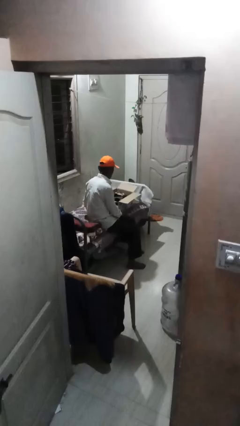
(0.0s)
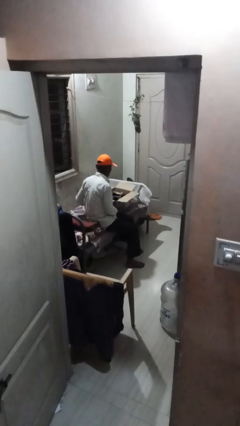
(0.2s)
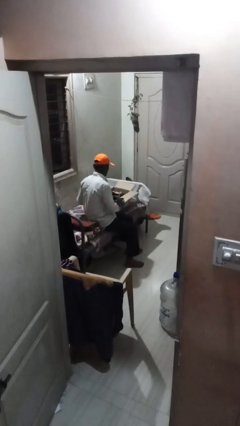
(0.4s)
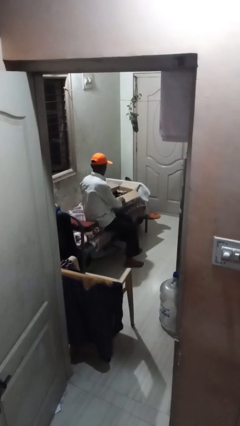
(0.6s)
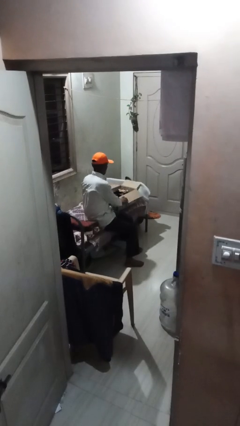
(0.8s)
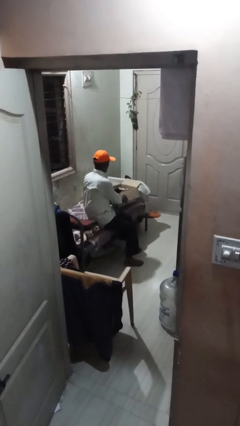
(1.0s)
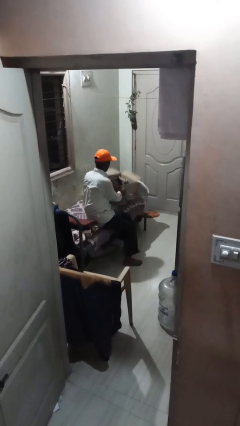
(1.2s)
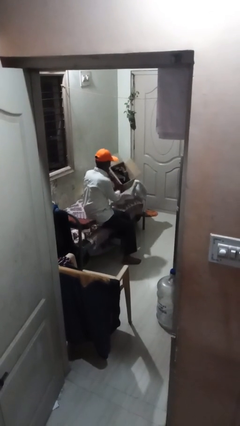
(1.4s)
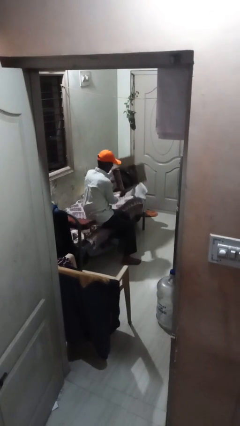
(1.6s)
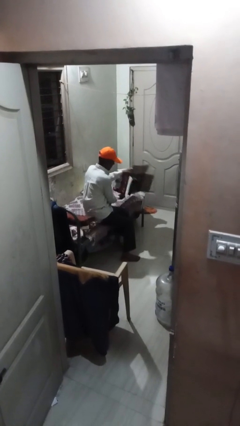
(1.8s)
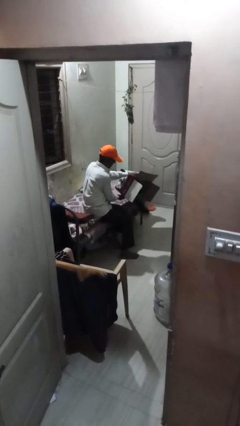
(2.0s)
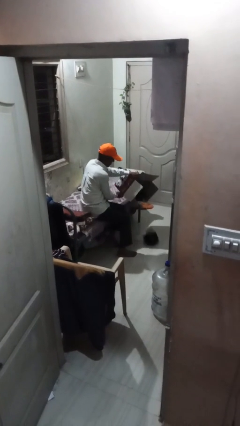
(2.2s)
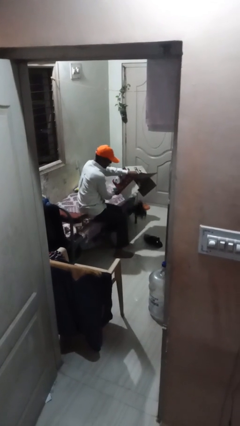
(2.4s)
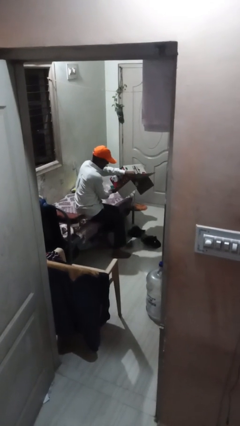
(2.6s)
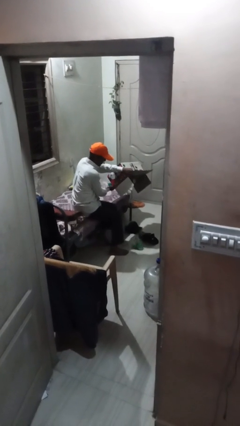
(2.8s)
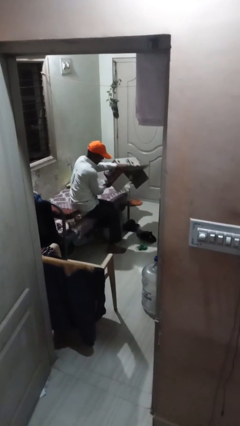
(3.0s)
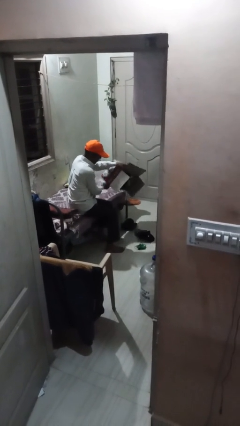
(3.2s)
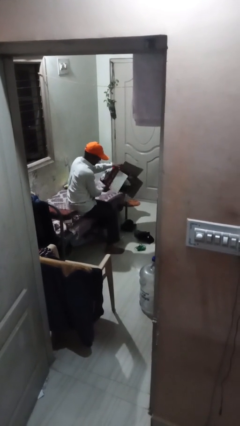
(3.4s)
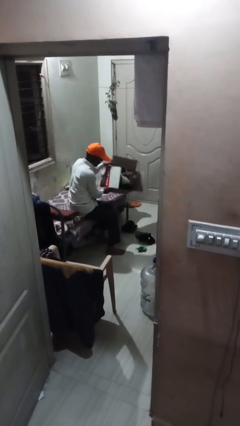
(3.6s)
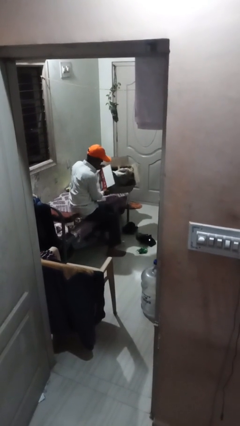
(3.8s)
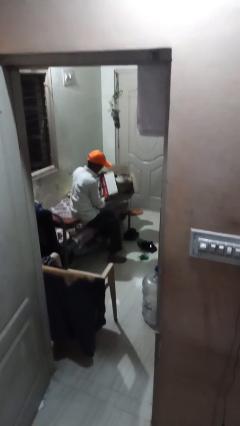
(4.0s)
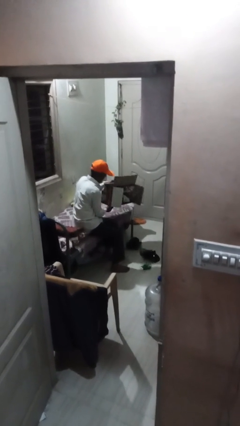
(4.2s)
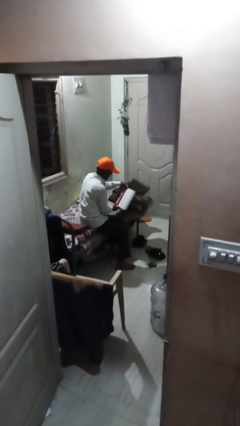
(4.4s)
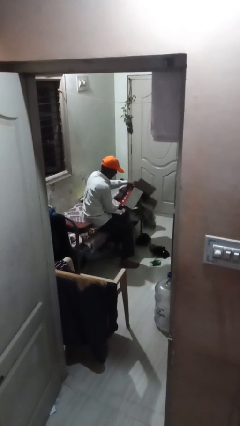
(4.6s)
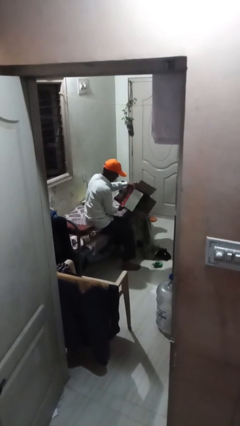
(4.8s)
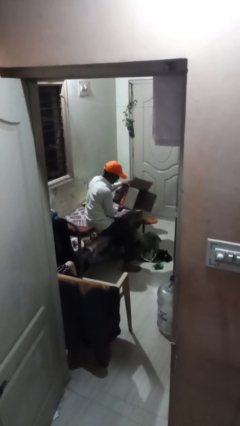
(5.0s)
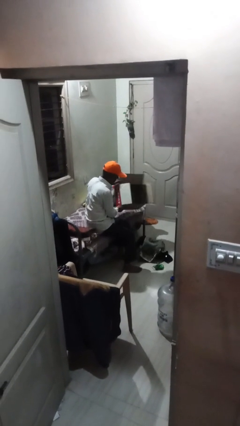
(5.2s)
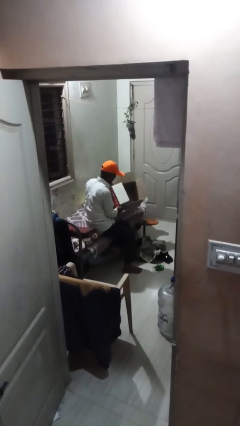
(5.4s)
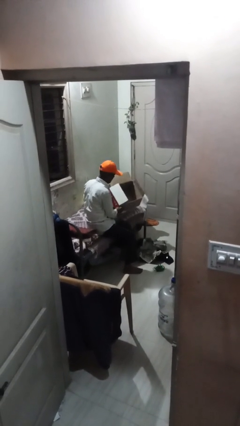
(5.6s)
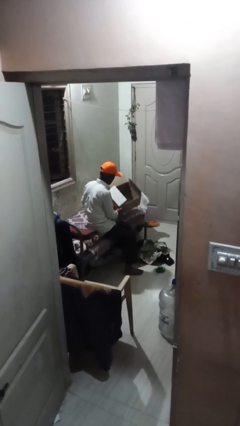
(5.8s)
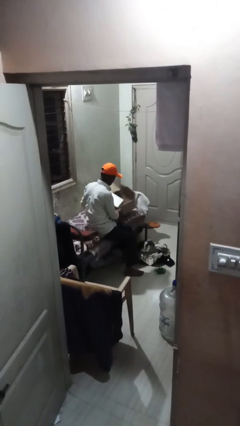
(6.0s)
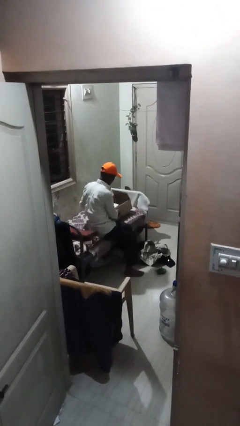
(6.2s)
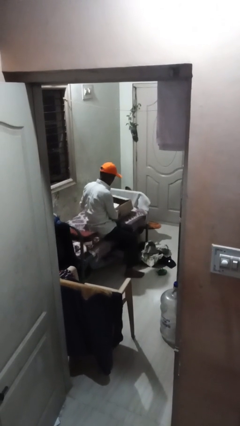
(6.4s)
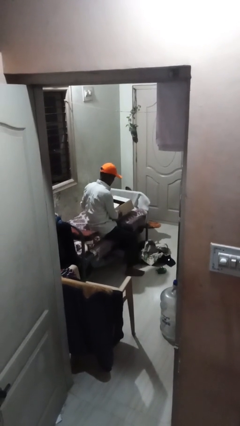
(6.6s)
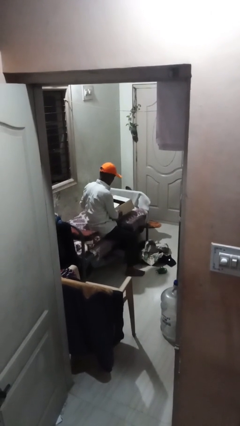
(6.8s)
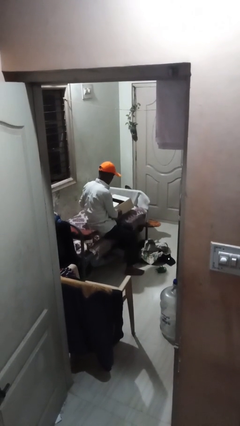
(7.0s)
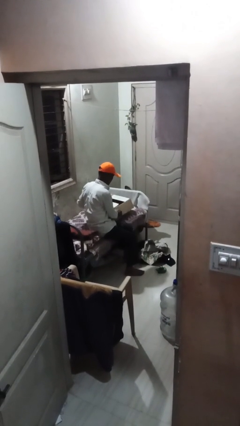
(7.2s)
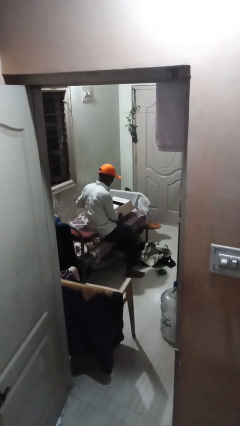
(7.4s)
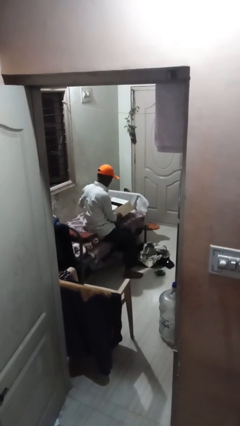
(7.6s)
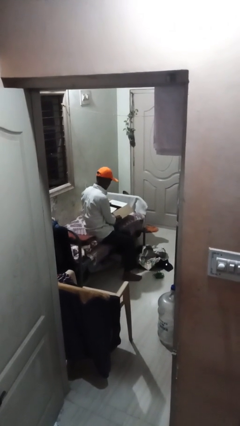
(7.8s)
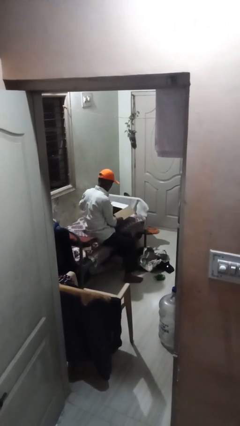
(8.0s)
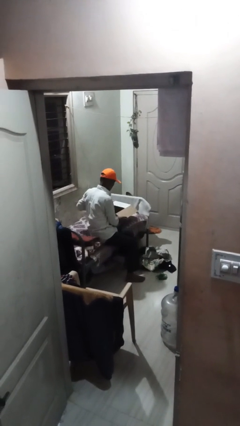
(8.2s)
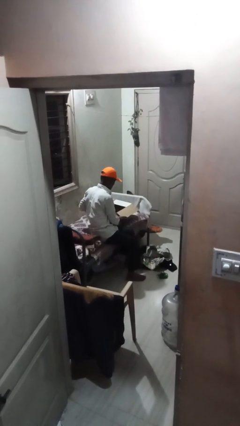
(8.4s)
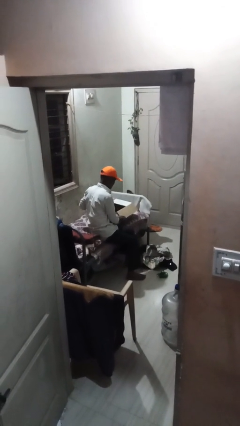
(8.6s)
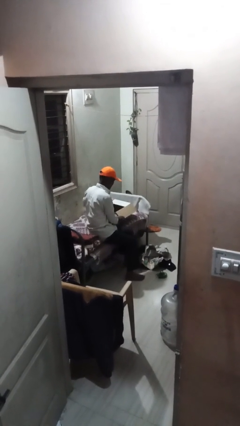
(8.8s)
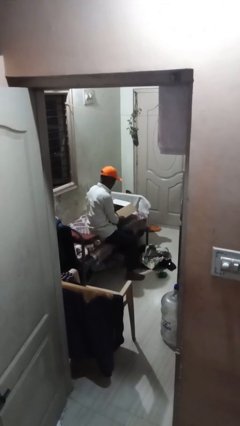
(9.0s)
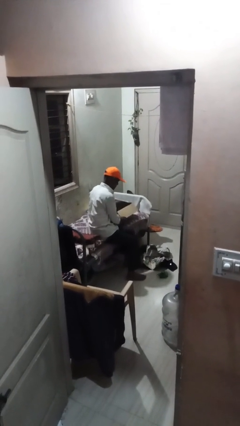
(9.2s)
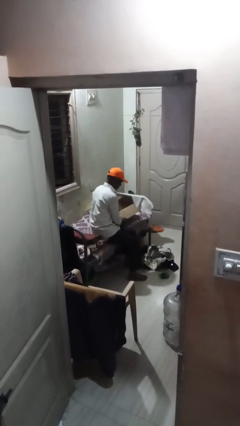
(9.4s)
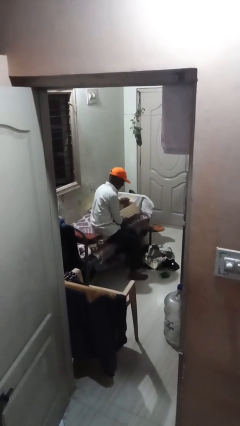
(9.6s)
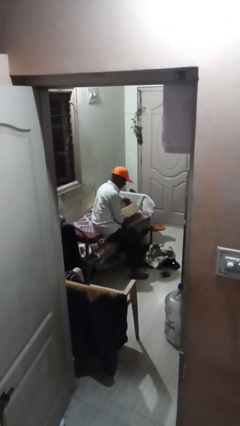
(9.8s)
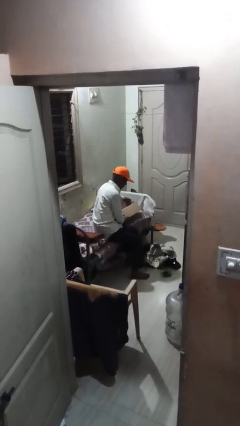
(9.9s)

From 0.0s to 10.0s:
person unloads box onto floor

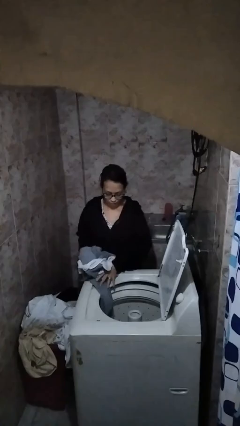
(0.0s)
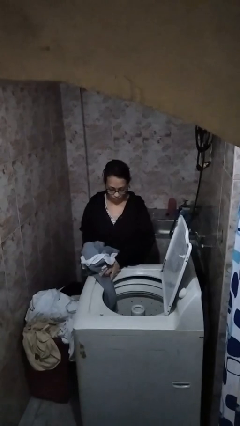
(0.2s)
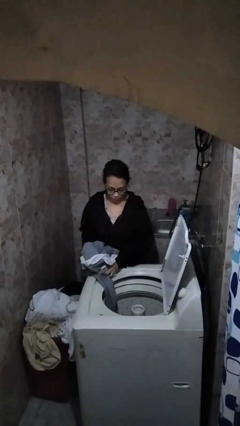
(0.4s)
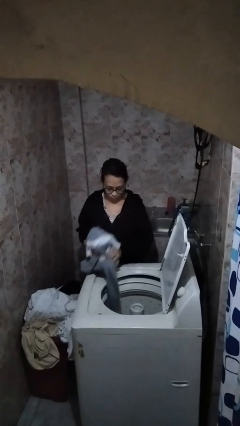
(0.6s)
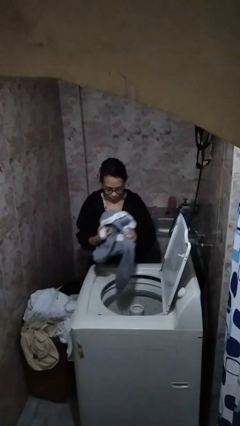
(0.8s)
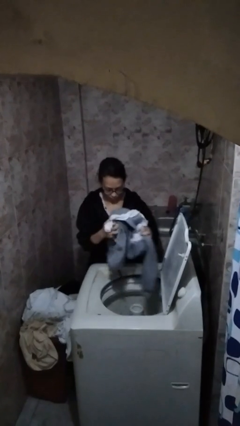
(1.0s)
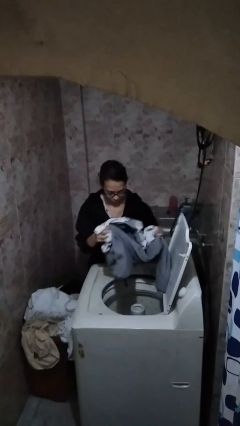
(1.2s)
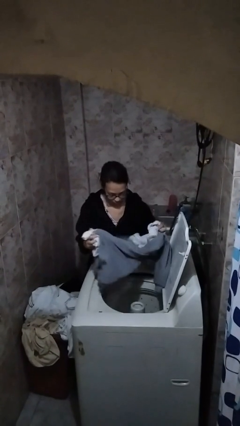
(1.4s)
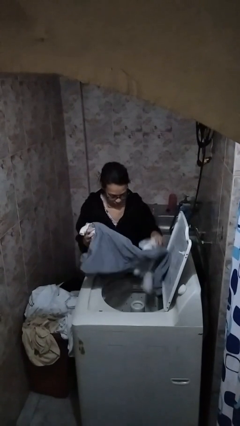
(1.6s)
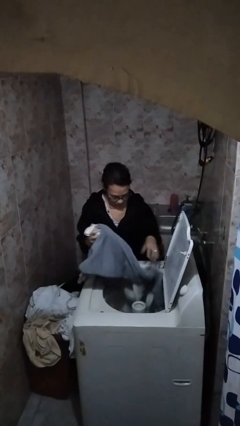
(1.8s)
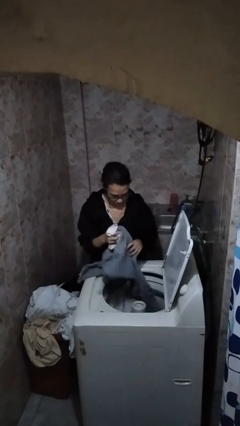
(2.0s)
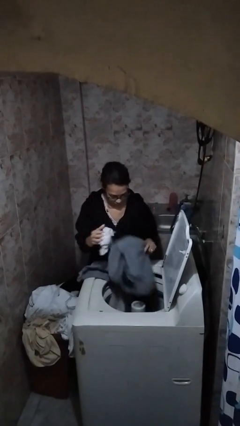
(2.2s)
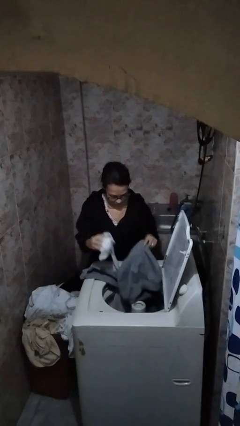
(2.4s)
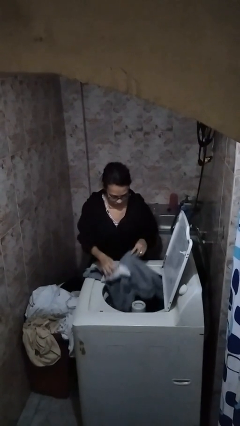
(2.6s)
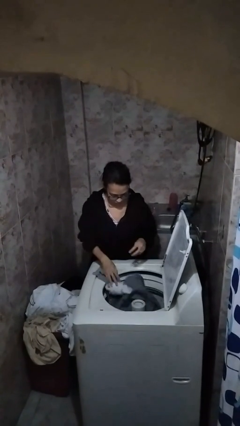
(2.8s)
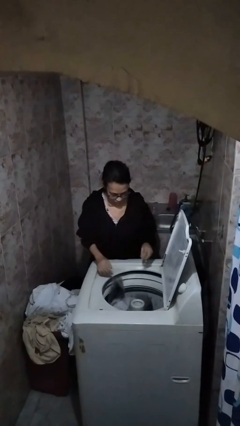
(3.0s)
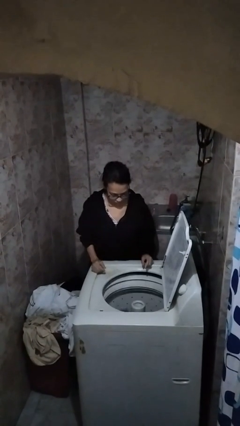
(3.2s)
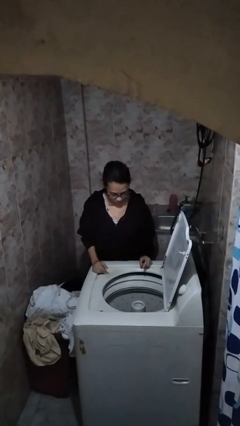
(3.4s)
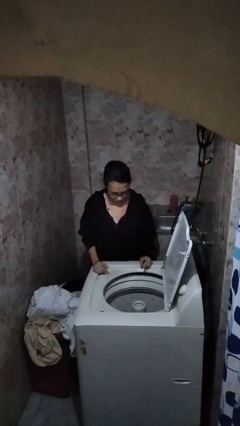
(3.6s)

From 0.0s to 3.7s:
person loads dryer

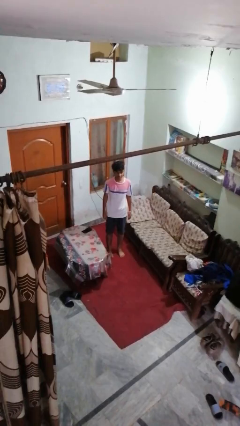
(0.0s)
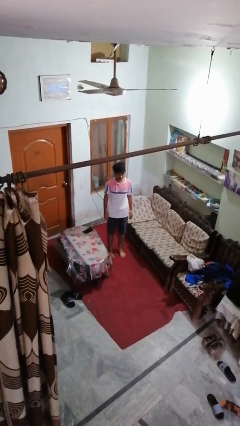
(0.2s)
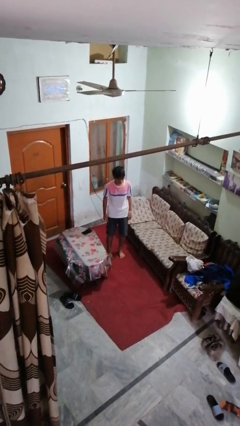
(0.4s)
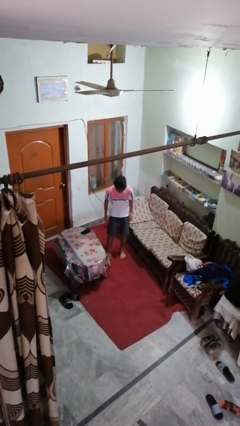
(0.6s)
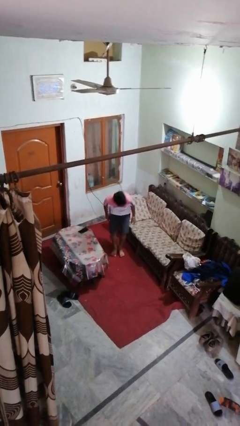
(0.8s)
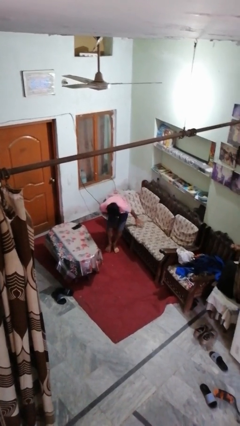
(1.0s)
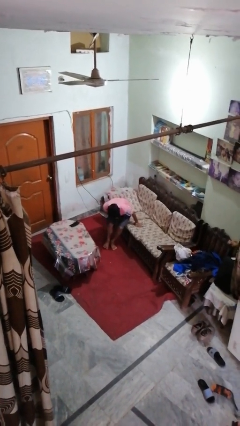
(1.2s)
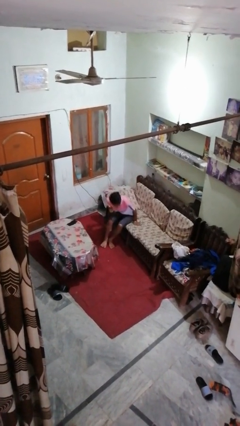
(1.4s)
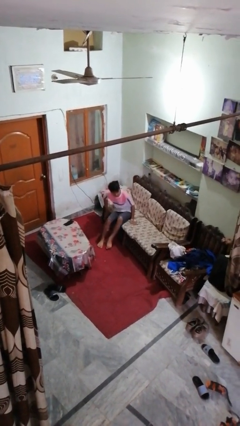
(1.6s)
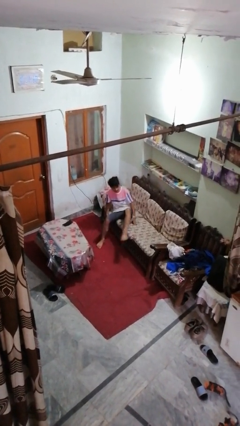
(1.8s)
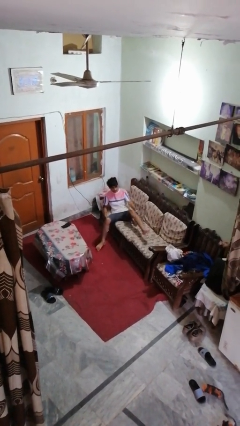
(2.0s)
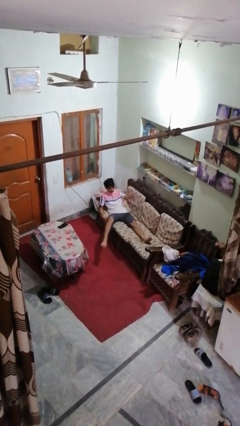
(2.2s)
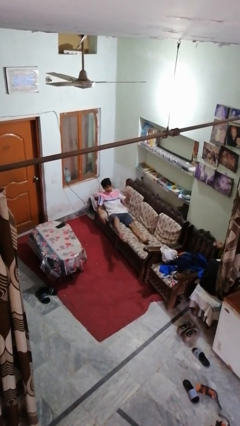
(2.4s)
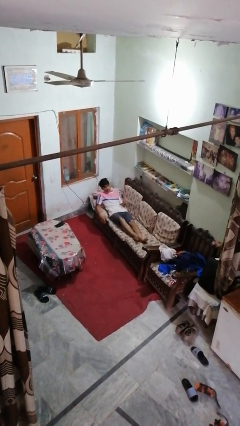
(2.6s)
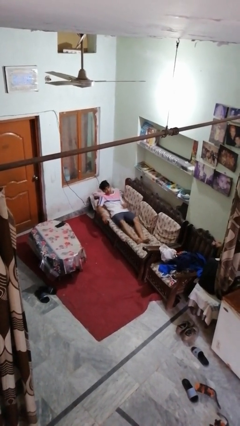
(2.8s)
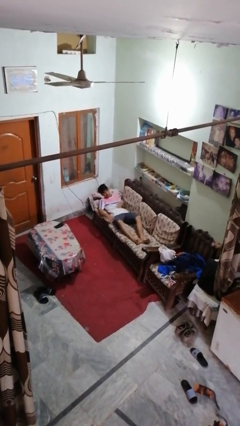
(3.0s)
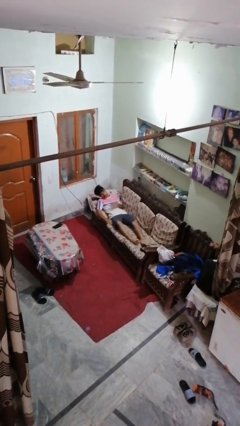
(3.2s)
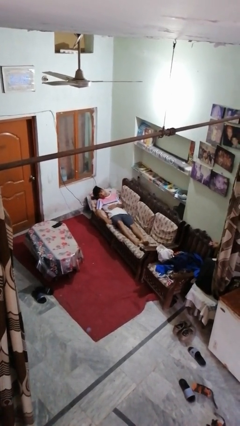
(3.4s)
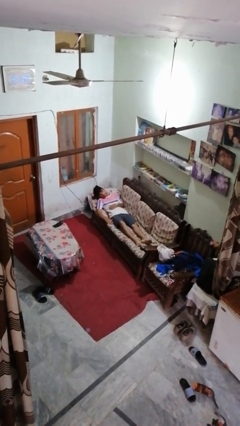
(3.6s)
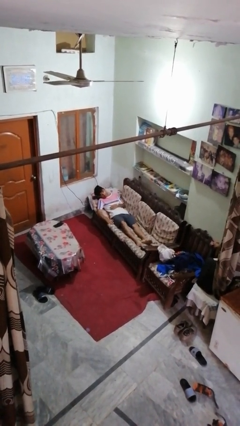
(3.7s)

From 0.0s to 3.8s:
person lies down on couch

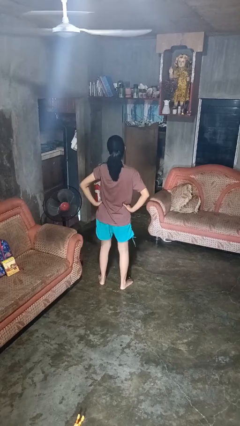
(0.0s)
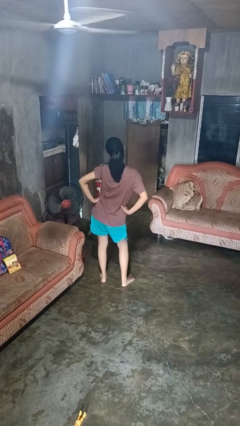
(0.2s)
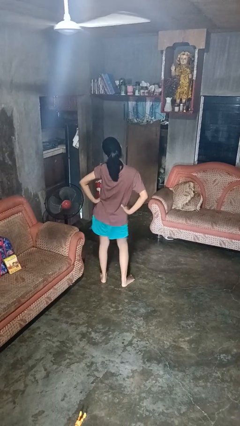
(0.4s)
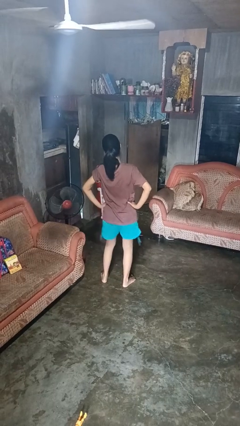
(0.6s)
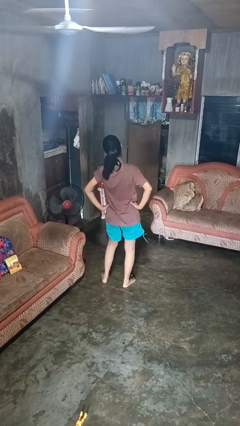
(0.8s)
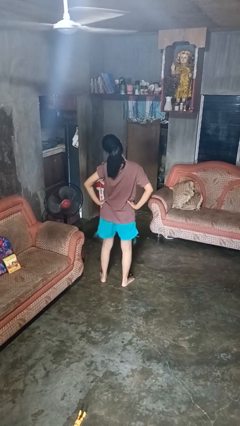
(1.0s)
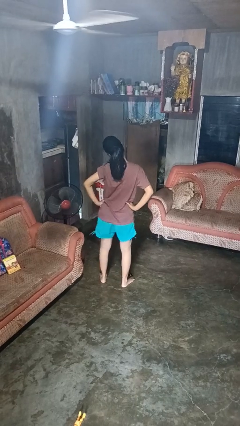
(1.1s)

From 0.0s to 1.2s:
person dances in place
